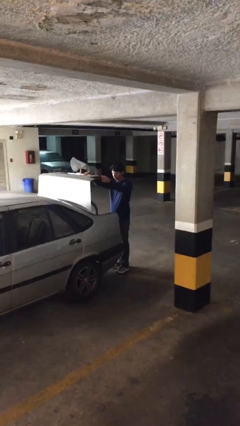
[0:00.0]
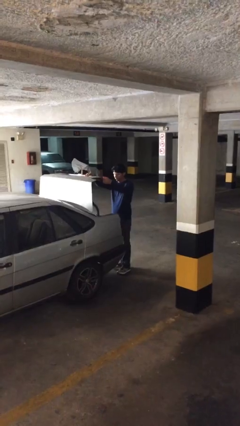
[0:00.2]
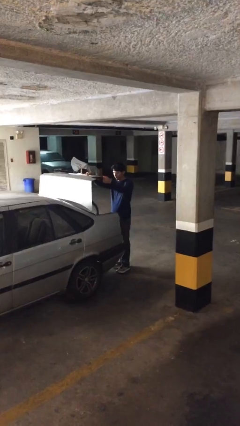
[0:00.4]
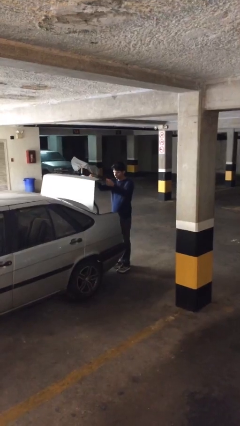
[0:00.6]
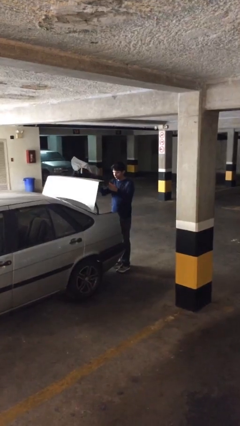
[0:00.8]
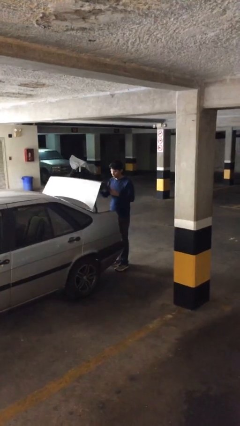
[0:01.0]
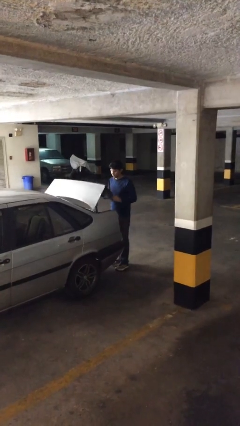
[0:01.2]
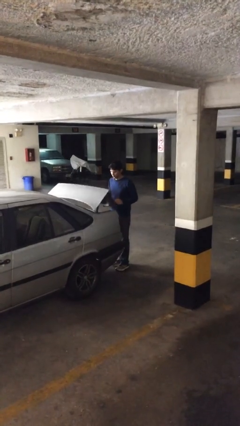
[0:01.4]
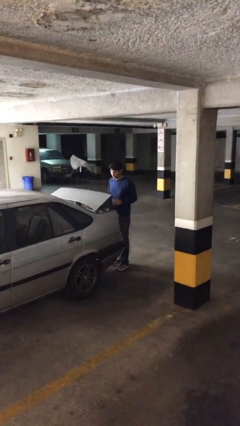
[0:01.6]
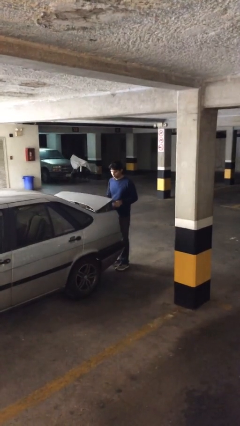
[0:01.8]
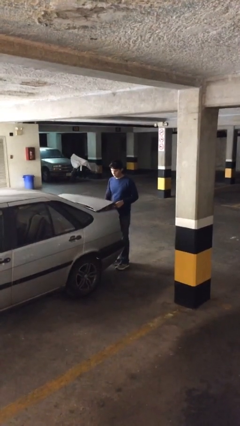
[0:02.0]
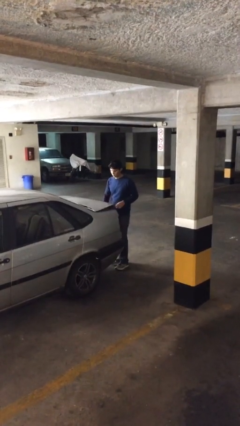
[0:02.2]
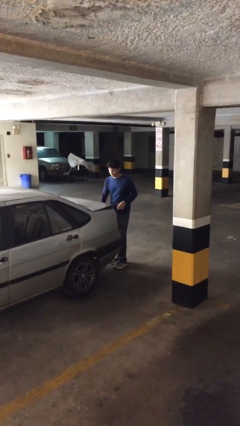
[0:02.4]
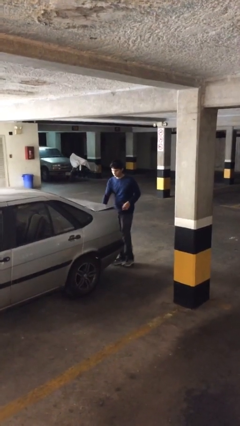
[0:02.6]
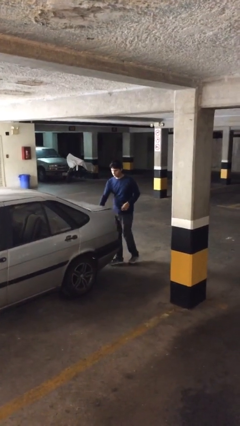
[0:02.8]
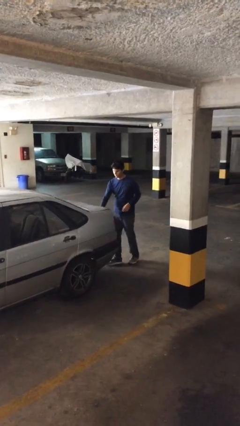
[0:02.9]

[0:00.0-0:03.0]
person closes car trunk

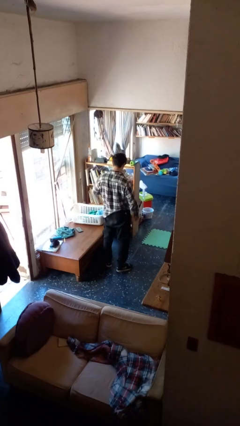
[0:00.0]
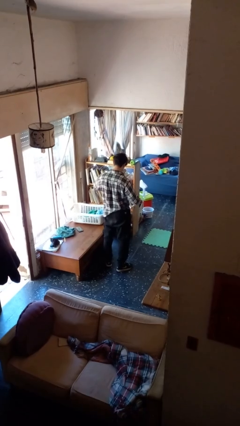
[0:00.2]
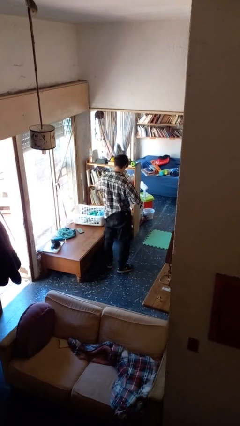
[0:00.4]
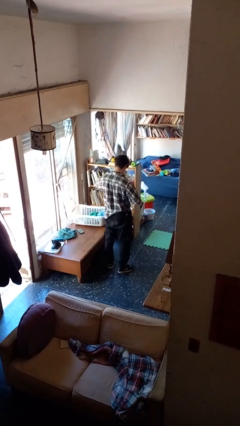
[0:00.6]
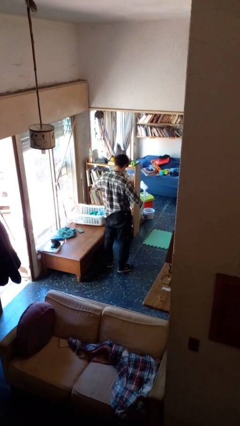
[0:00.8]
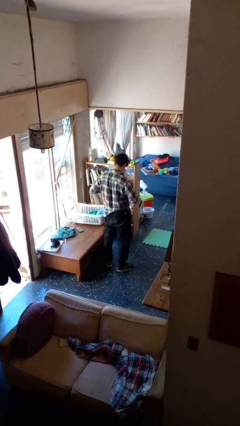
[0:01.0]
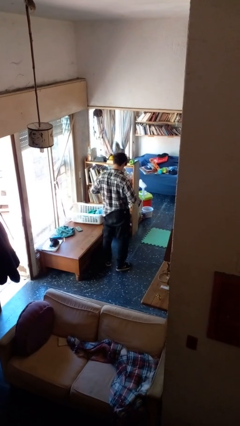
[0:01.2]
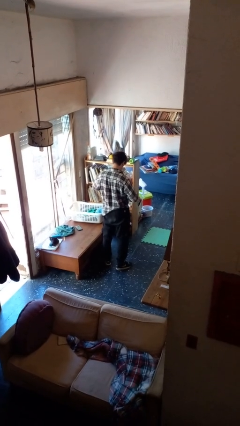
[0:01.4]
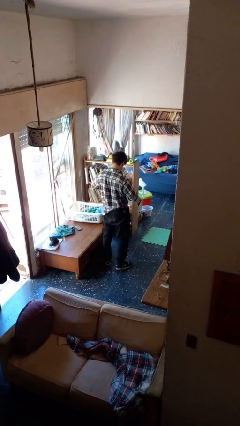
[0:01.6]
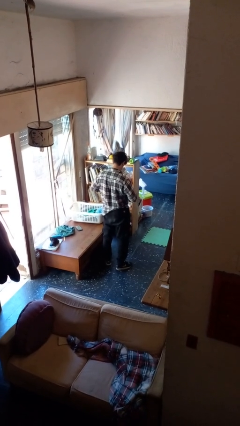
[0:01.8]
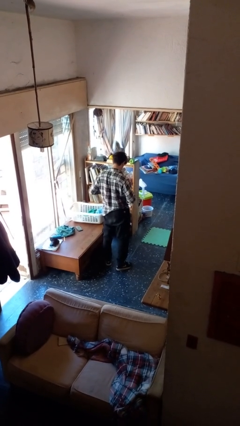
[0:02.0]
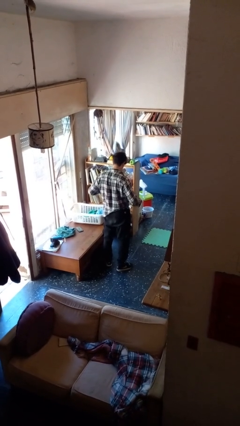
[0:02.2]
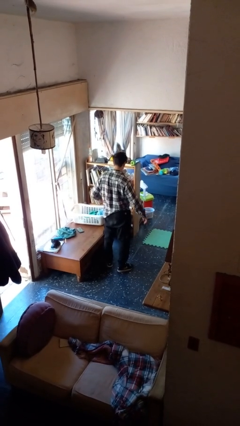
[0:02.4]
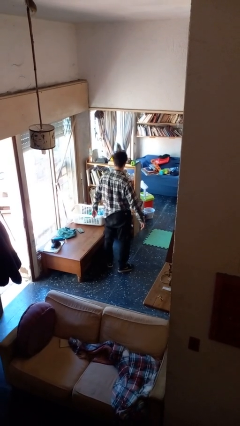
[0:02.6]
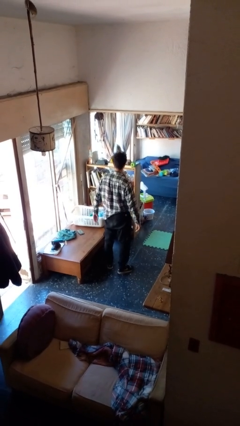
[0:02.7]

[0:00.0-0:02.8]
person unbuttons shirt

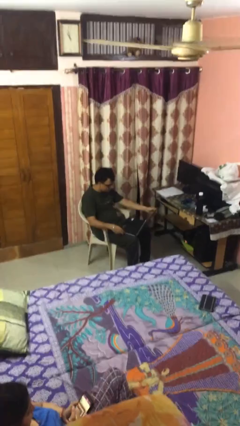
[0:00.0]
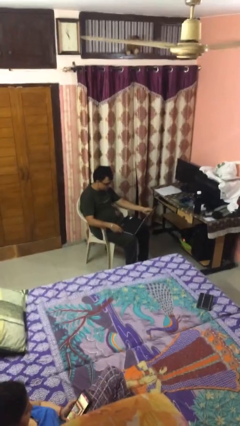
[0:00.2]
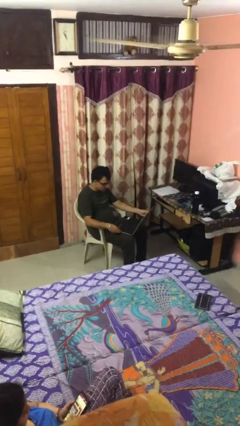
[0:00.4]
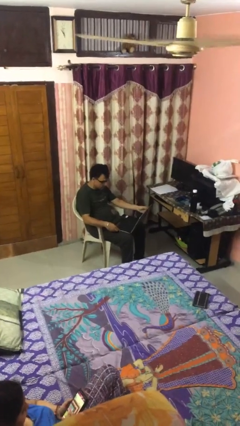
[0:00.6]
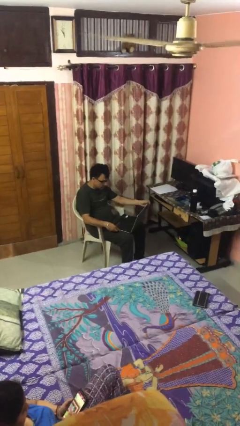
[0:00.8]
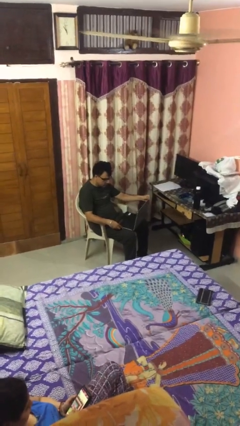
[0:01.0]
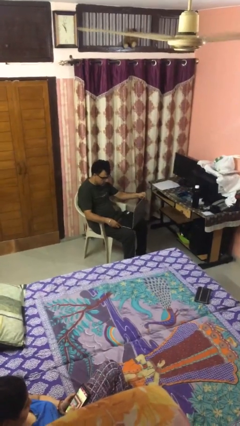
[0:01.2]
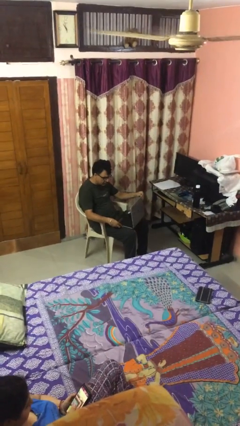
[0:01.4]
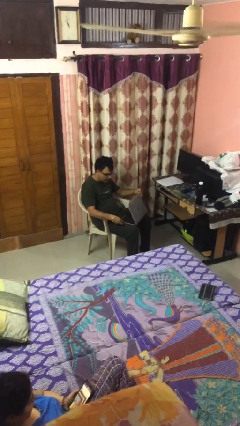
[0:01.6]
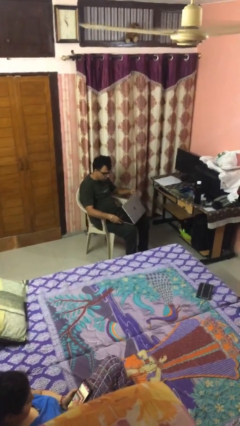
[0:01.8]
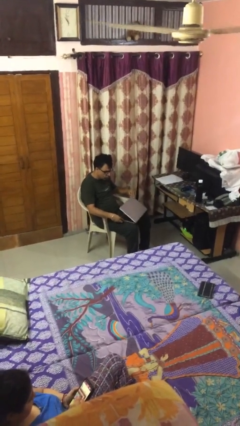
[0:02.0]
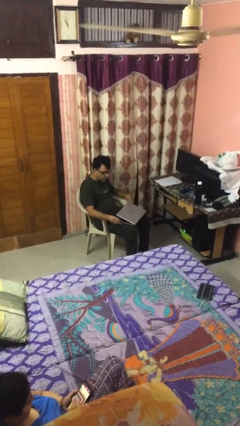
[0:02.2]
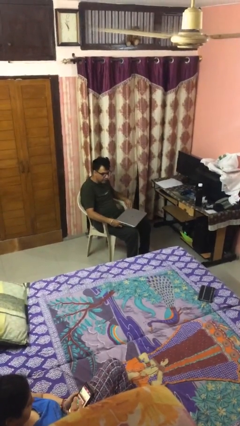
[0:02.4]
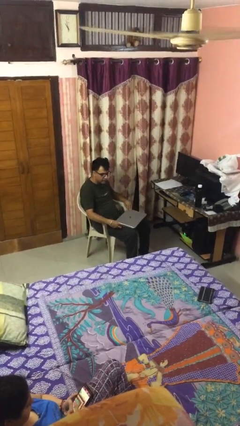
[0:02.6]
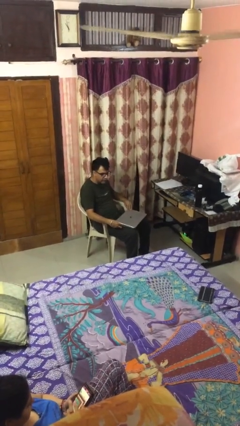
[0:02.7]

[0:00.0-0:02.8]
person closes laptop

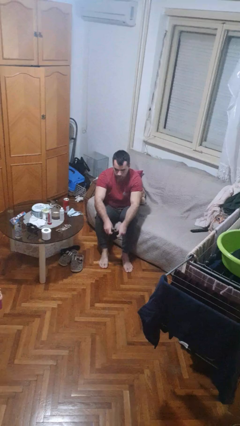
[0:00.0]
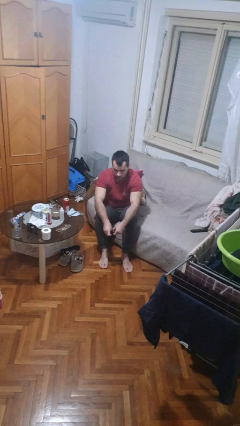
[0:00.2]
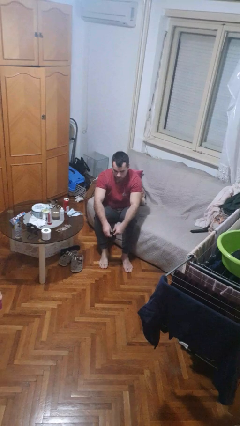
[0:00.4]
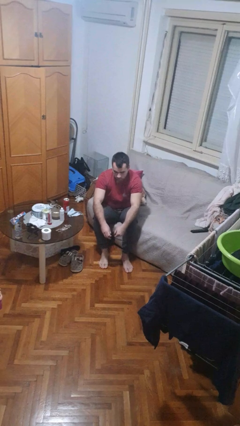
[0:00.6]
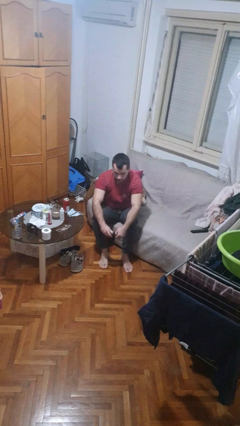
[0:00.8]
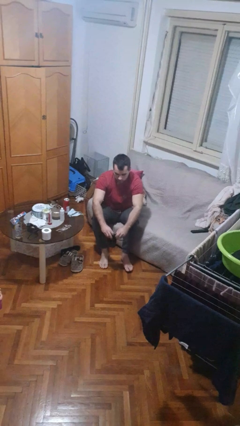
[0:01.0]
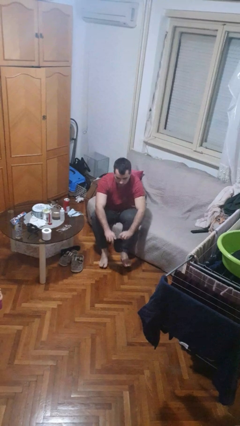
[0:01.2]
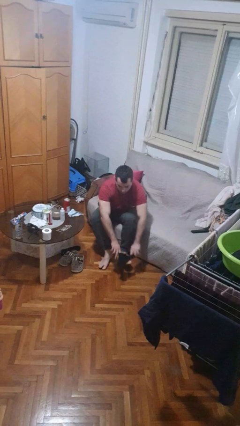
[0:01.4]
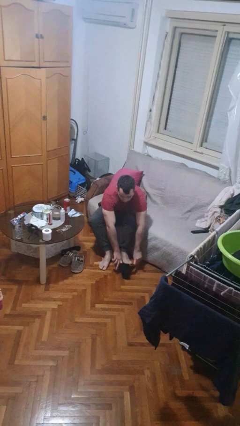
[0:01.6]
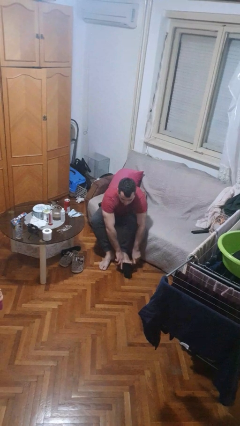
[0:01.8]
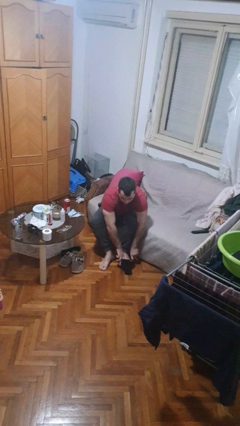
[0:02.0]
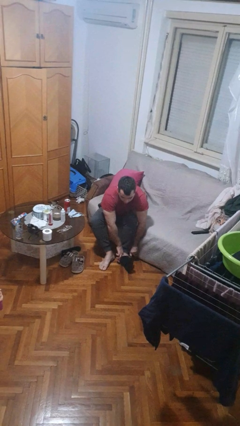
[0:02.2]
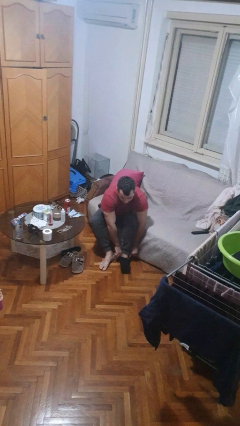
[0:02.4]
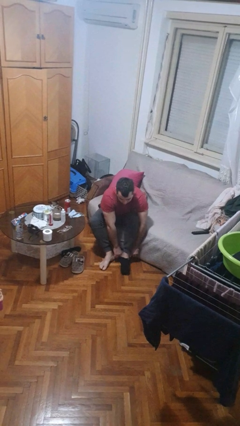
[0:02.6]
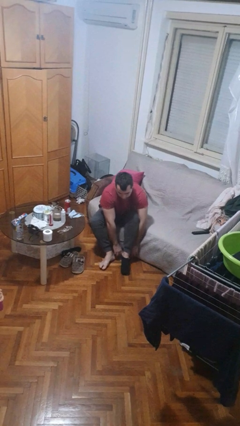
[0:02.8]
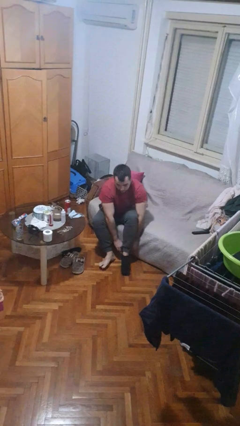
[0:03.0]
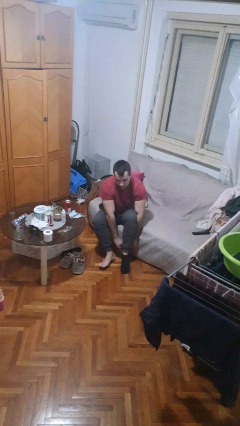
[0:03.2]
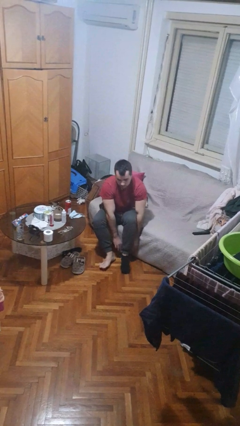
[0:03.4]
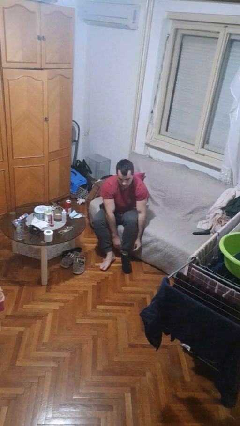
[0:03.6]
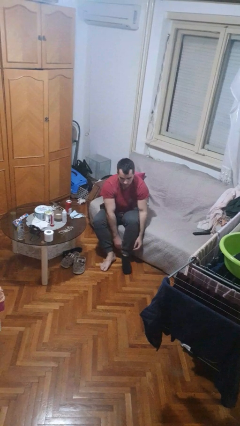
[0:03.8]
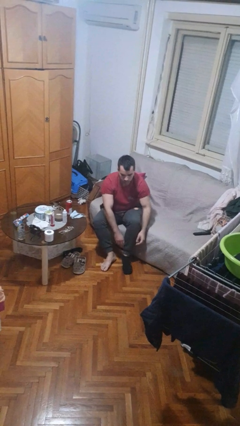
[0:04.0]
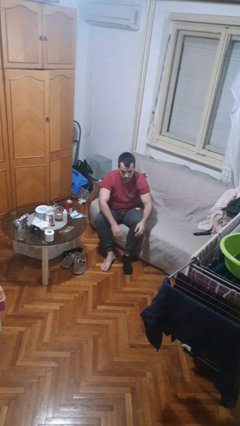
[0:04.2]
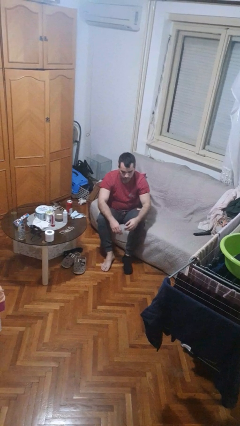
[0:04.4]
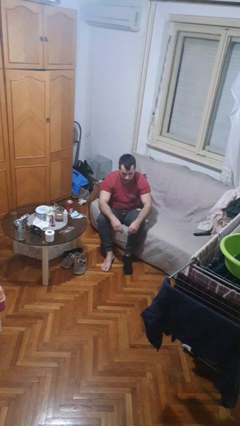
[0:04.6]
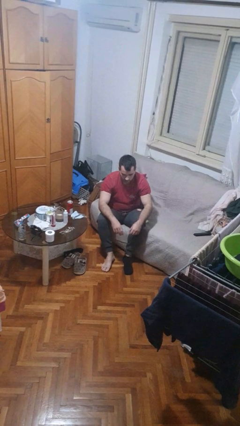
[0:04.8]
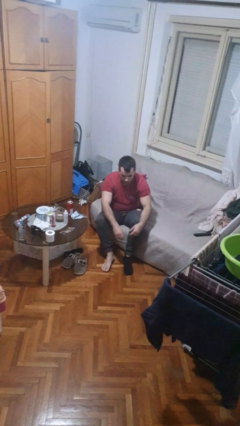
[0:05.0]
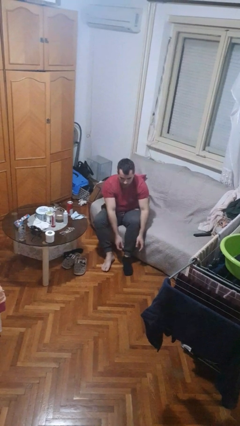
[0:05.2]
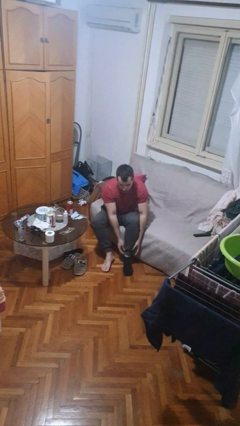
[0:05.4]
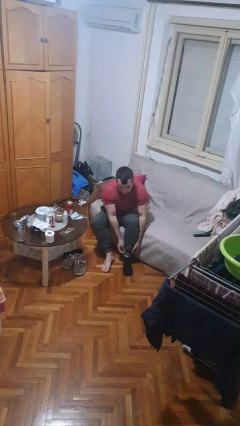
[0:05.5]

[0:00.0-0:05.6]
person puts on socks

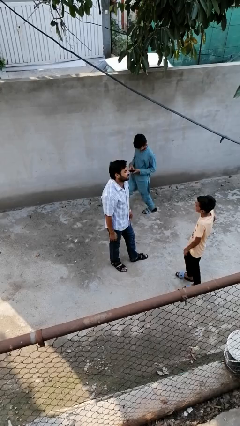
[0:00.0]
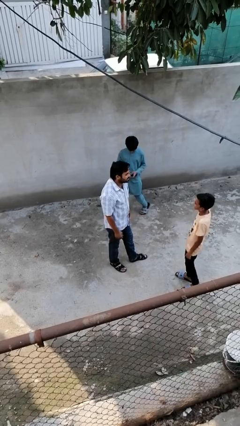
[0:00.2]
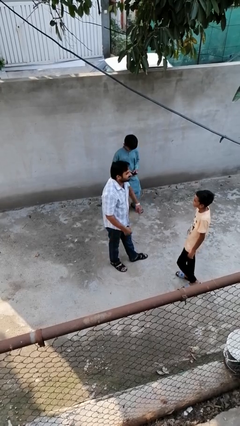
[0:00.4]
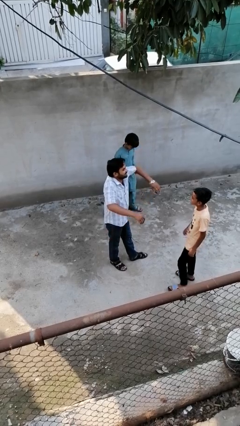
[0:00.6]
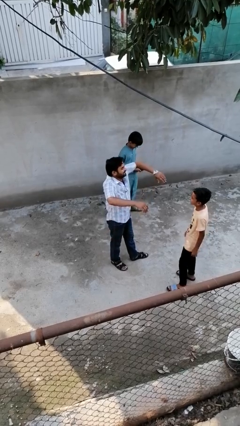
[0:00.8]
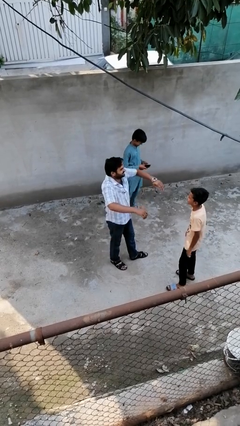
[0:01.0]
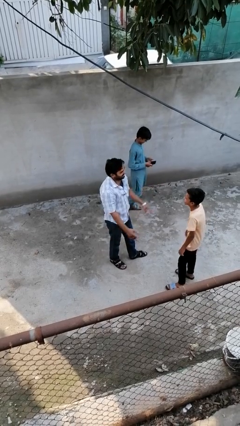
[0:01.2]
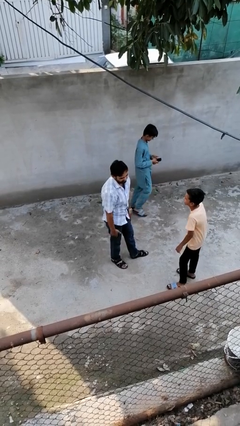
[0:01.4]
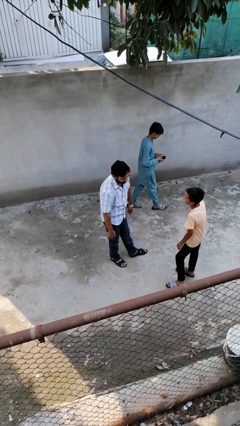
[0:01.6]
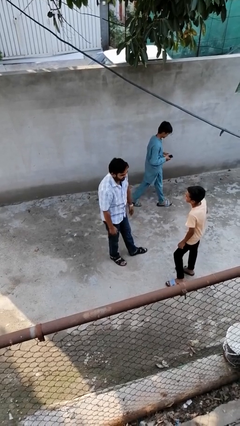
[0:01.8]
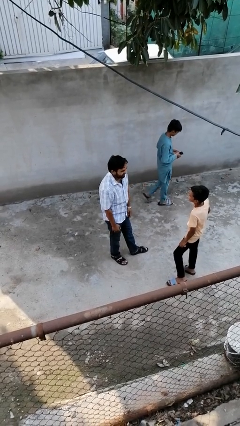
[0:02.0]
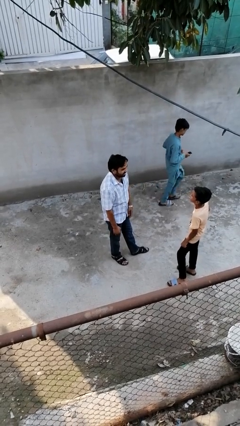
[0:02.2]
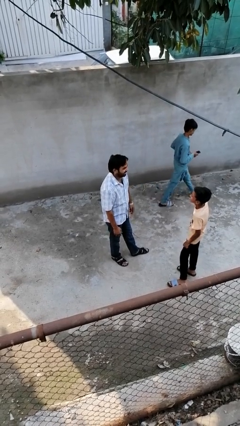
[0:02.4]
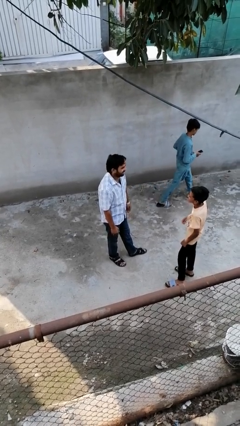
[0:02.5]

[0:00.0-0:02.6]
person laughs with person

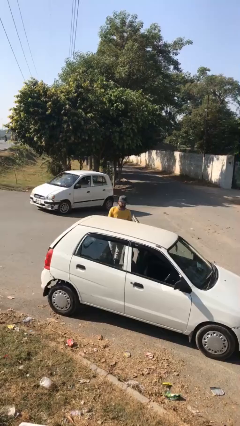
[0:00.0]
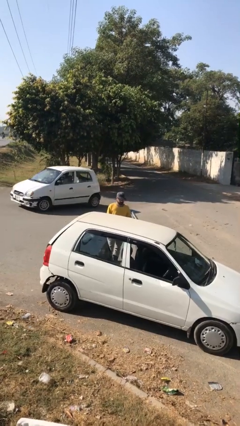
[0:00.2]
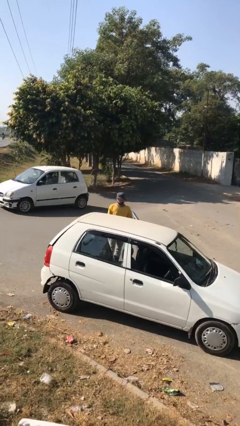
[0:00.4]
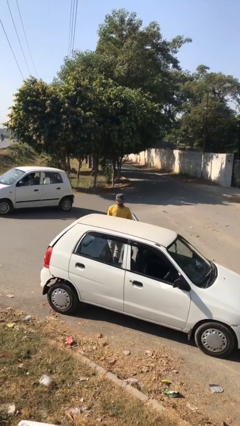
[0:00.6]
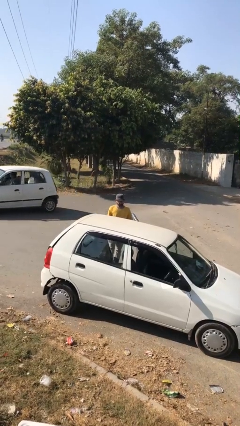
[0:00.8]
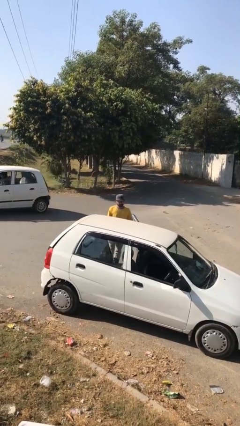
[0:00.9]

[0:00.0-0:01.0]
person closes car door
